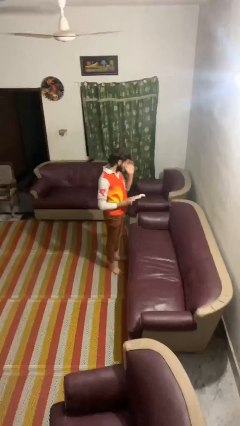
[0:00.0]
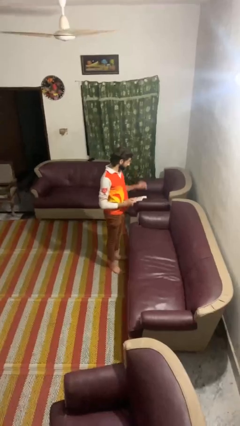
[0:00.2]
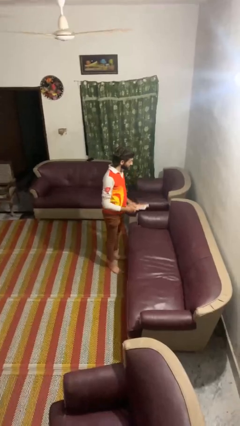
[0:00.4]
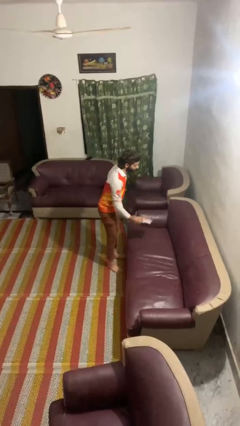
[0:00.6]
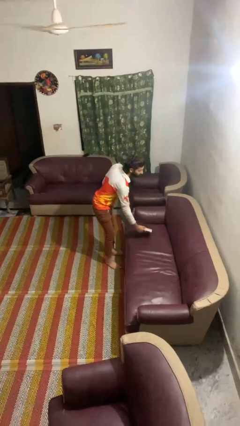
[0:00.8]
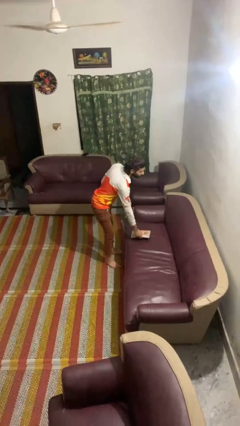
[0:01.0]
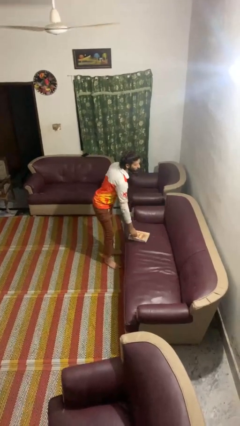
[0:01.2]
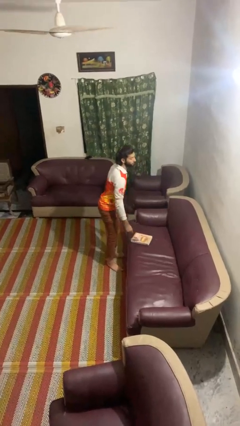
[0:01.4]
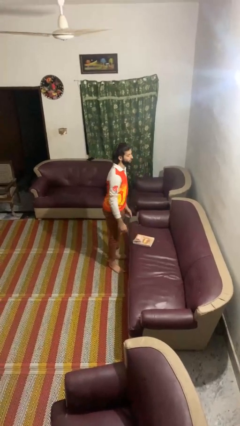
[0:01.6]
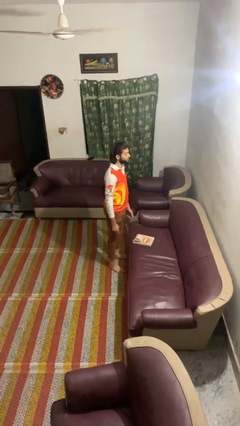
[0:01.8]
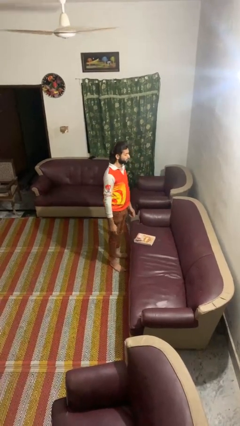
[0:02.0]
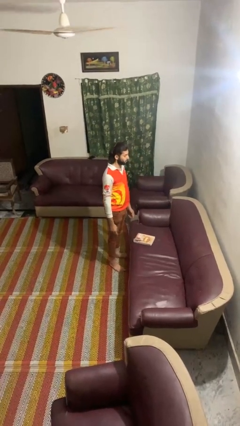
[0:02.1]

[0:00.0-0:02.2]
person puts down object on couch

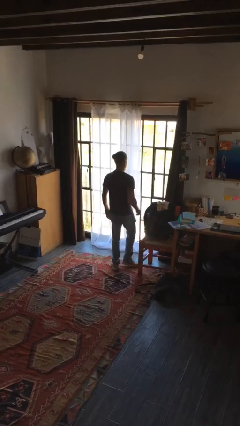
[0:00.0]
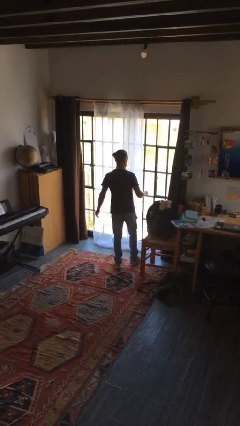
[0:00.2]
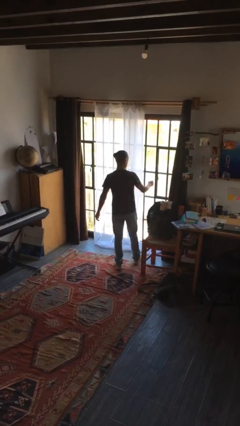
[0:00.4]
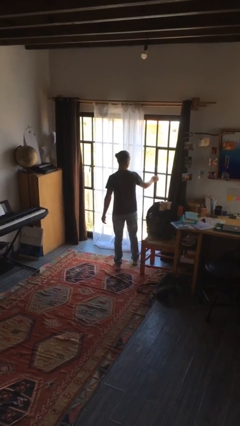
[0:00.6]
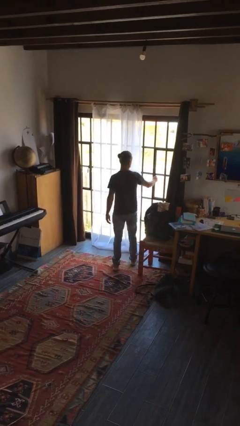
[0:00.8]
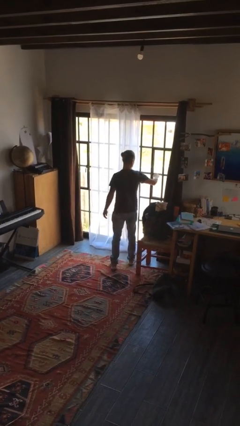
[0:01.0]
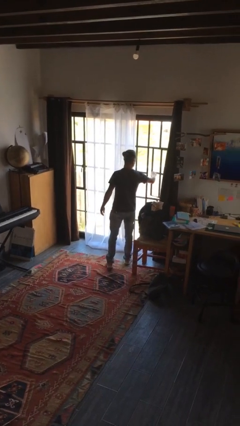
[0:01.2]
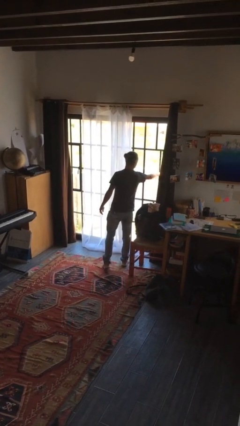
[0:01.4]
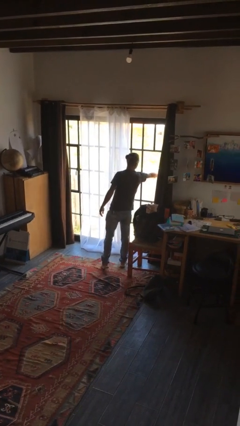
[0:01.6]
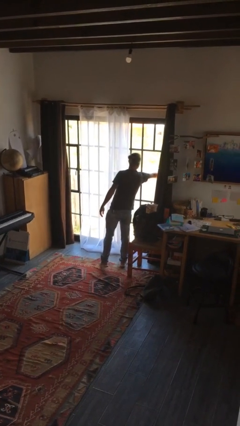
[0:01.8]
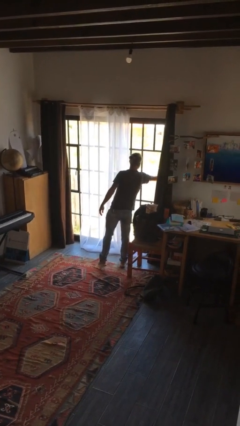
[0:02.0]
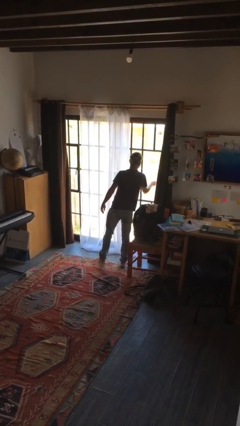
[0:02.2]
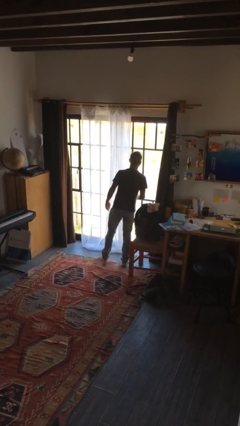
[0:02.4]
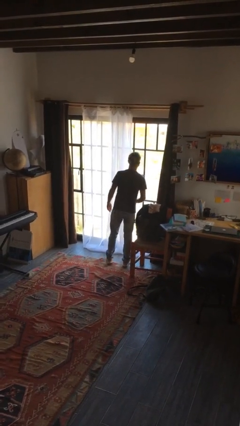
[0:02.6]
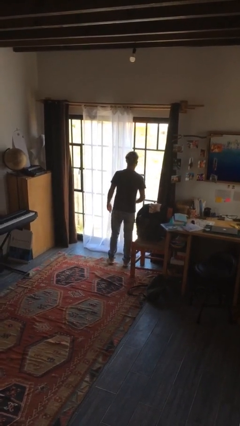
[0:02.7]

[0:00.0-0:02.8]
person opens home window

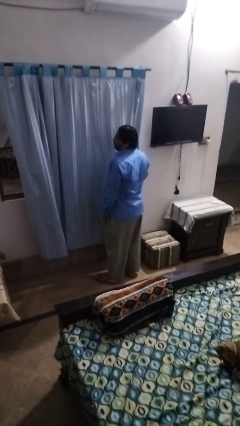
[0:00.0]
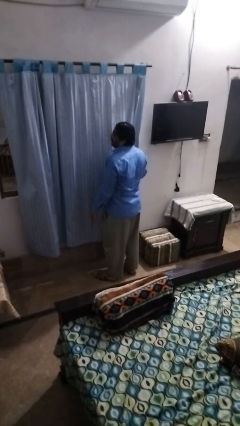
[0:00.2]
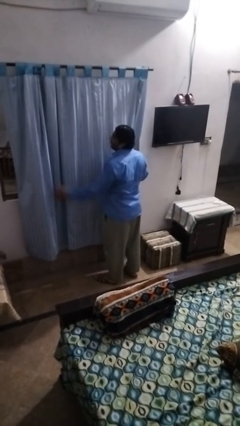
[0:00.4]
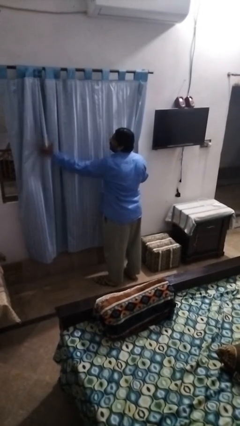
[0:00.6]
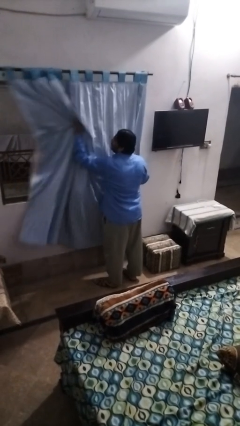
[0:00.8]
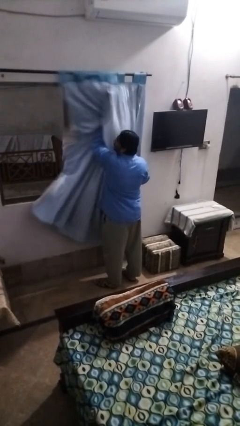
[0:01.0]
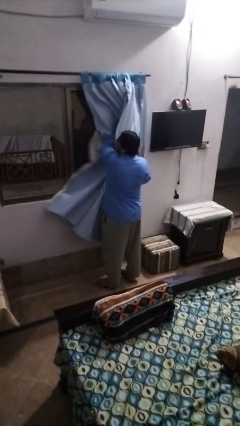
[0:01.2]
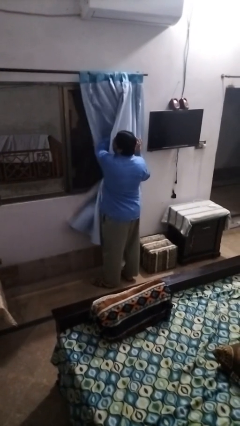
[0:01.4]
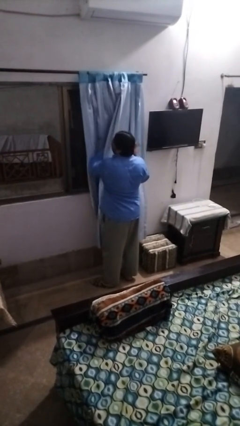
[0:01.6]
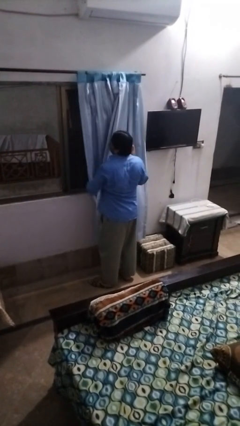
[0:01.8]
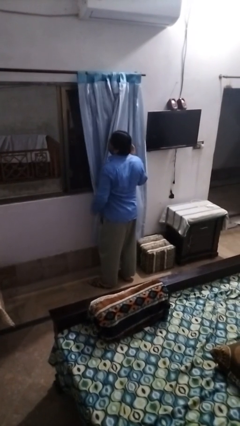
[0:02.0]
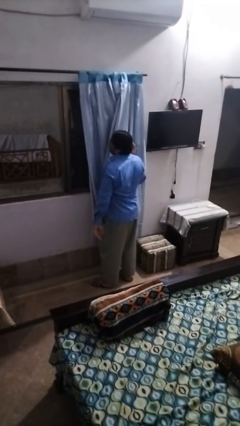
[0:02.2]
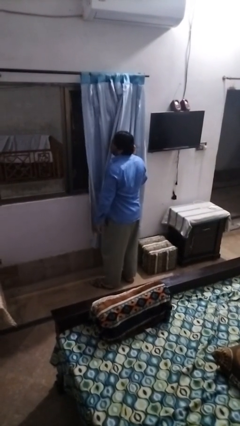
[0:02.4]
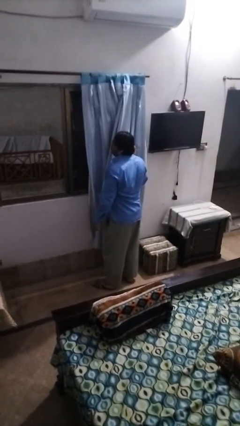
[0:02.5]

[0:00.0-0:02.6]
person opens curtains

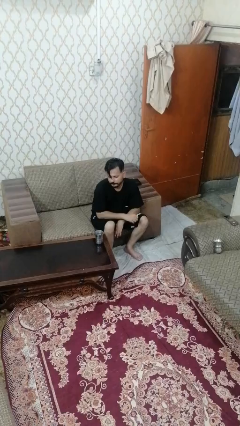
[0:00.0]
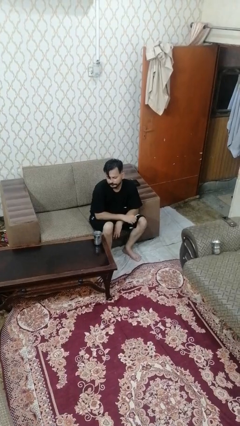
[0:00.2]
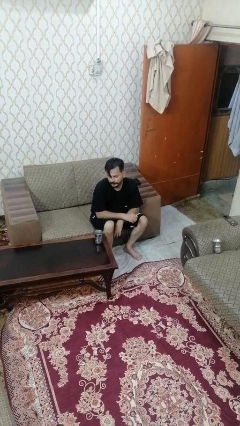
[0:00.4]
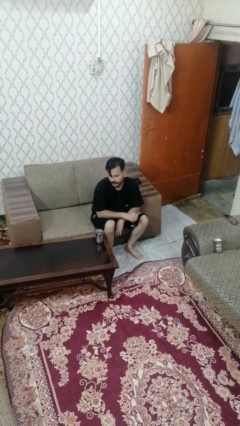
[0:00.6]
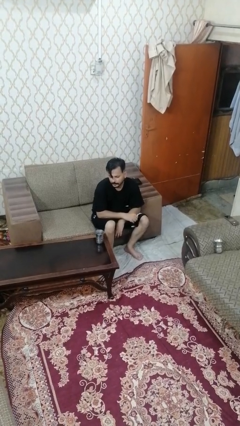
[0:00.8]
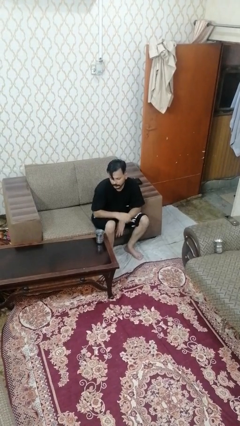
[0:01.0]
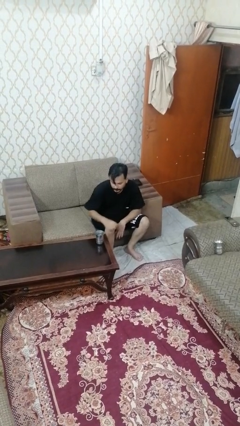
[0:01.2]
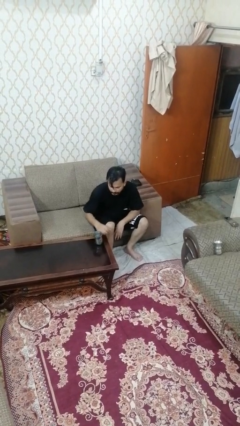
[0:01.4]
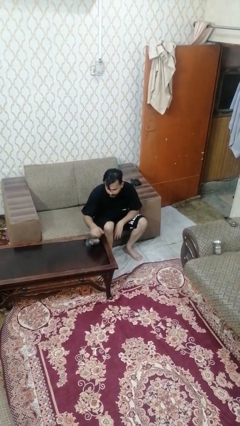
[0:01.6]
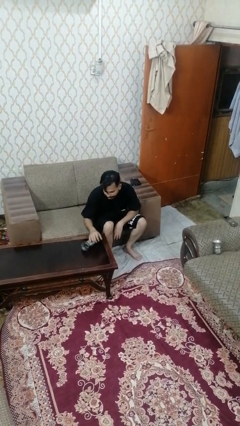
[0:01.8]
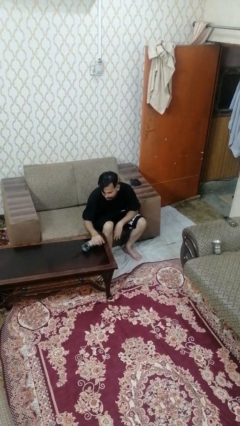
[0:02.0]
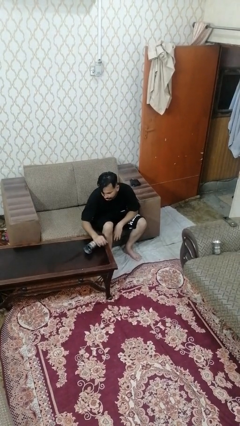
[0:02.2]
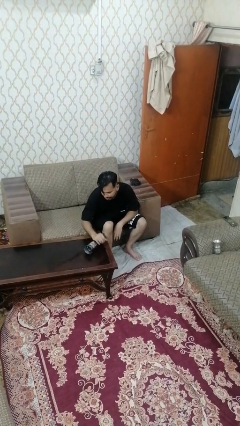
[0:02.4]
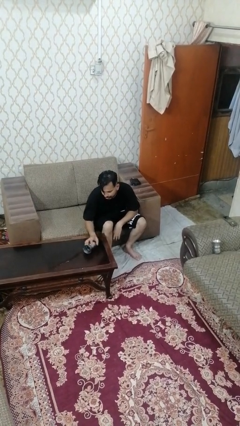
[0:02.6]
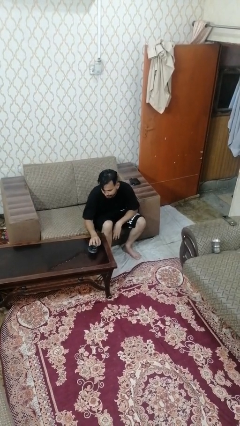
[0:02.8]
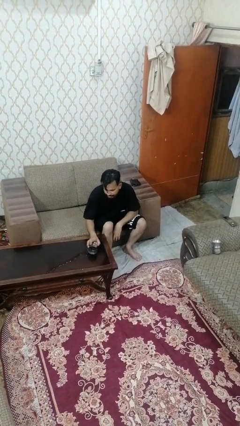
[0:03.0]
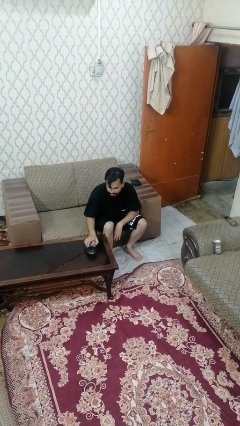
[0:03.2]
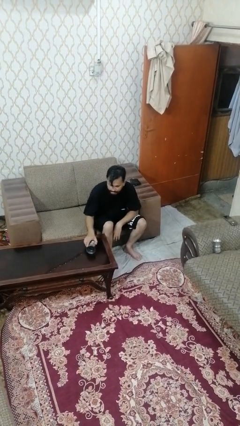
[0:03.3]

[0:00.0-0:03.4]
person spills on table

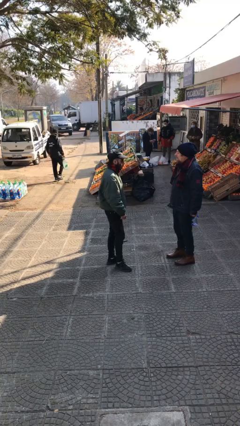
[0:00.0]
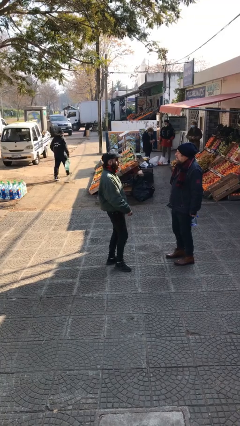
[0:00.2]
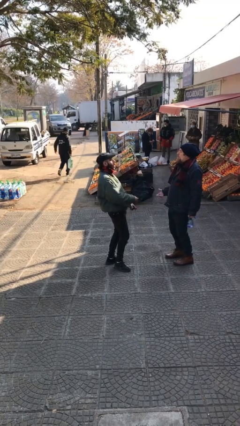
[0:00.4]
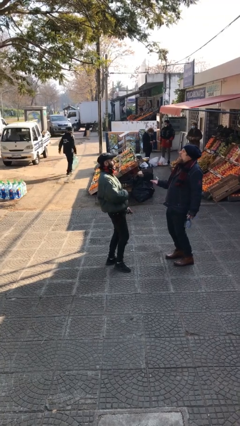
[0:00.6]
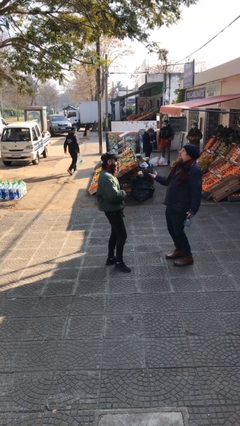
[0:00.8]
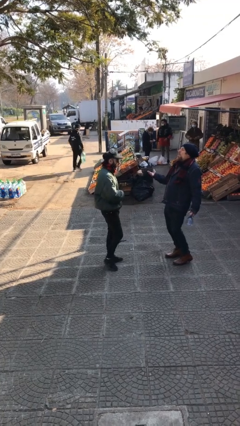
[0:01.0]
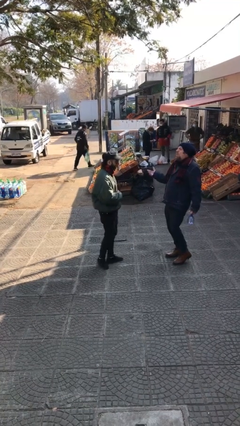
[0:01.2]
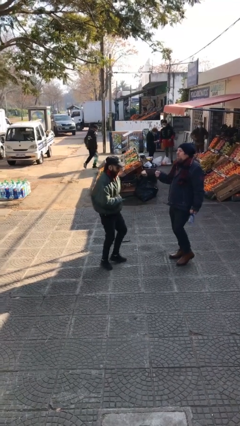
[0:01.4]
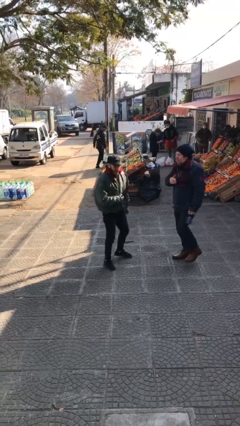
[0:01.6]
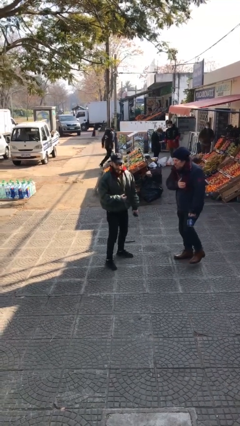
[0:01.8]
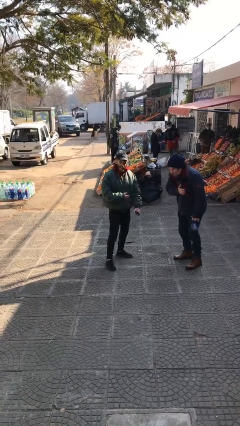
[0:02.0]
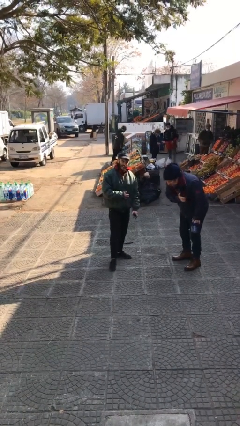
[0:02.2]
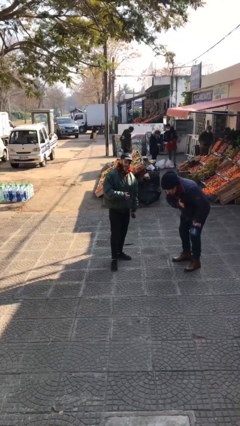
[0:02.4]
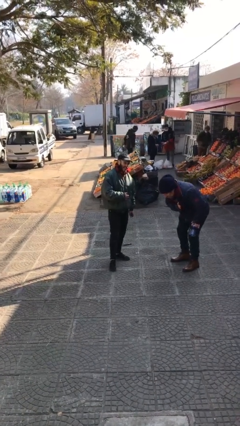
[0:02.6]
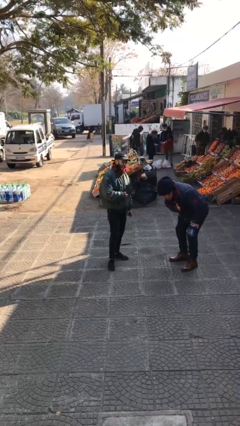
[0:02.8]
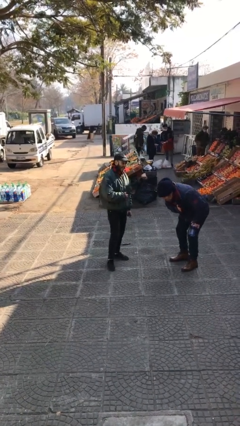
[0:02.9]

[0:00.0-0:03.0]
person laughs with person

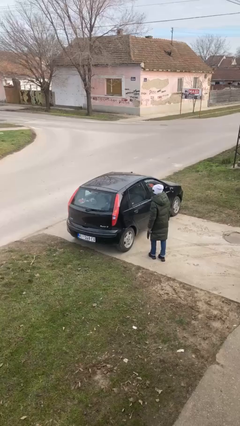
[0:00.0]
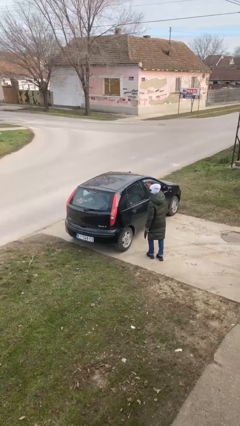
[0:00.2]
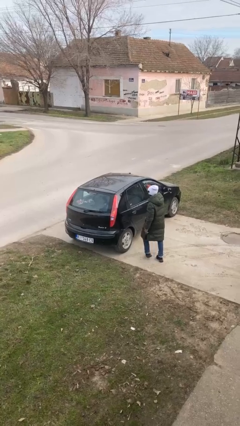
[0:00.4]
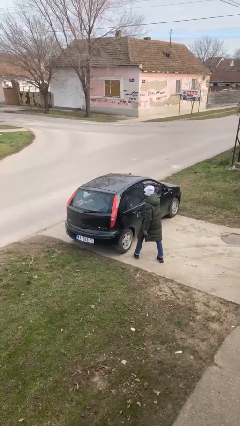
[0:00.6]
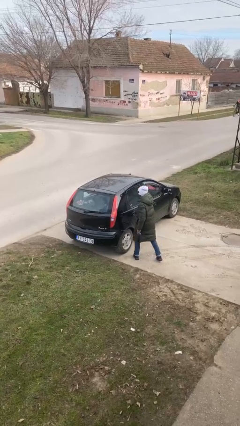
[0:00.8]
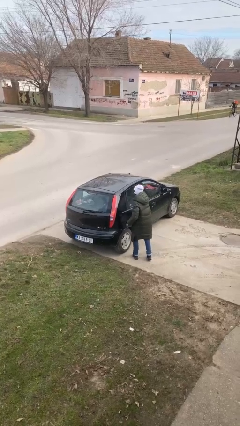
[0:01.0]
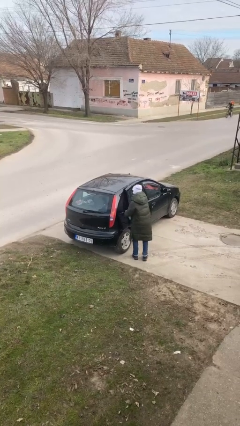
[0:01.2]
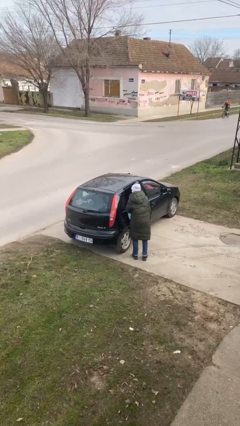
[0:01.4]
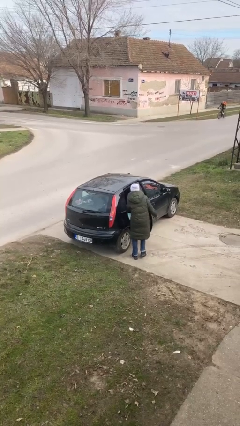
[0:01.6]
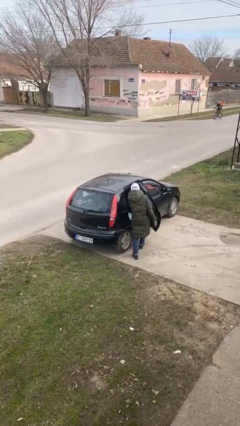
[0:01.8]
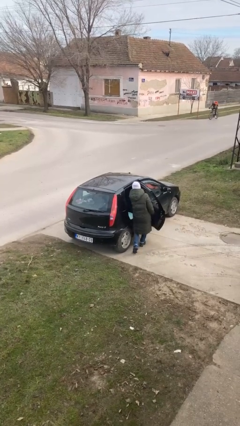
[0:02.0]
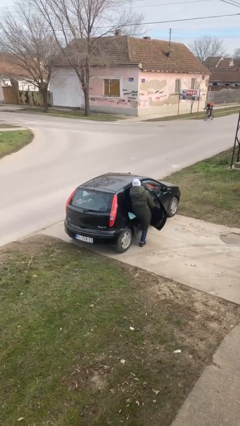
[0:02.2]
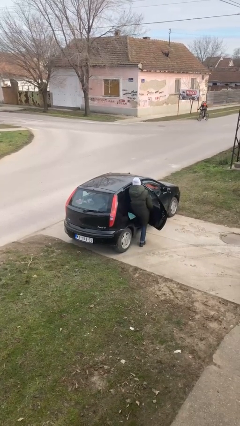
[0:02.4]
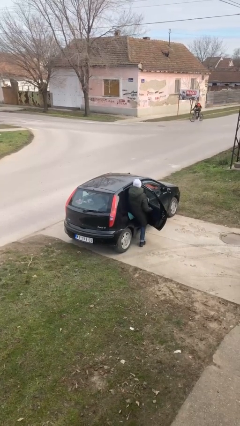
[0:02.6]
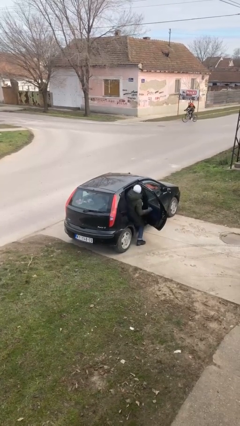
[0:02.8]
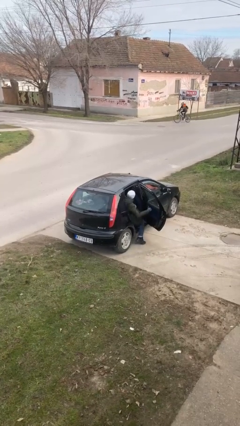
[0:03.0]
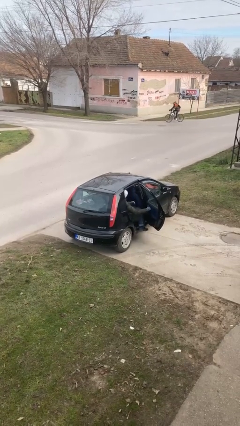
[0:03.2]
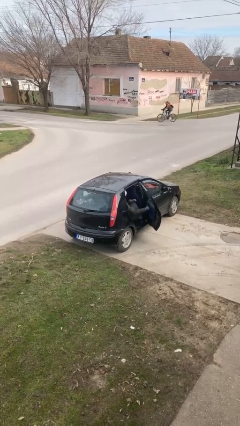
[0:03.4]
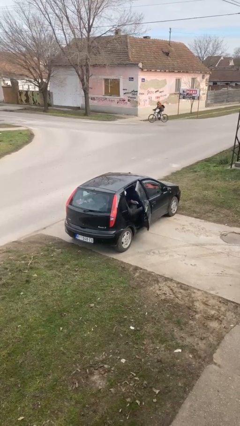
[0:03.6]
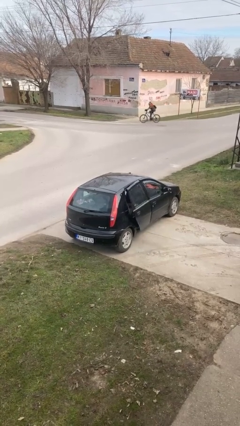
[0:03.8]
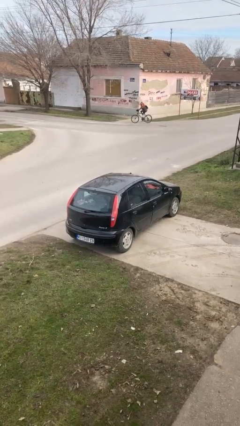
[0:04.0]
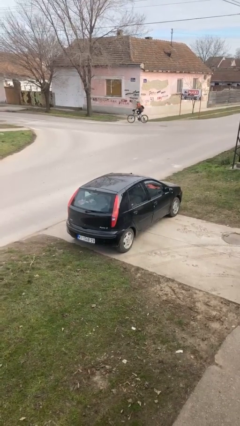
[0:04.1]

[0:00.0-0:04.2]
car picks up person
